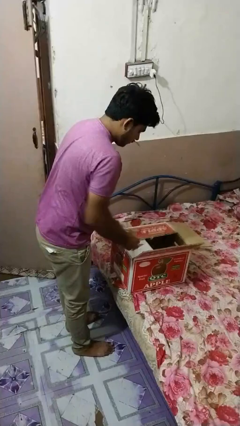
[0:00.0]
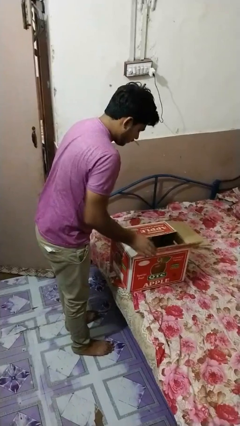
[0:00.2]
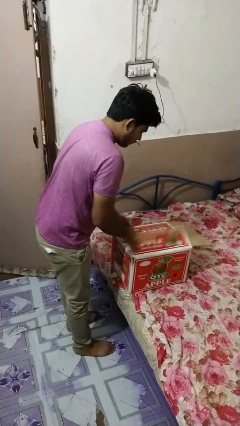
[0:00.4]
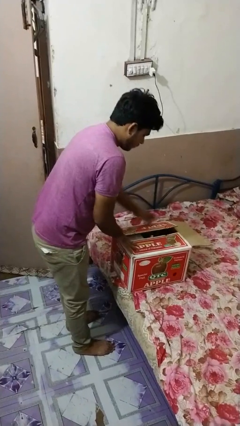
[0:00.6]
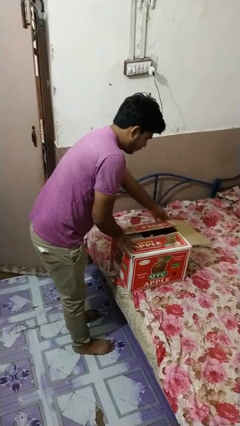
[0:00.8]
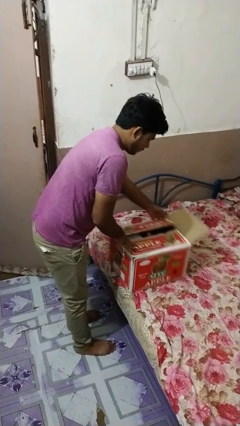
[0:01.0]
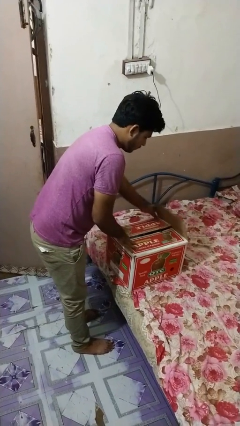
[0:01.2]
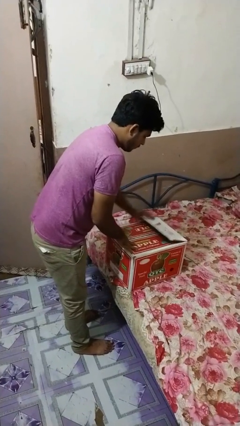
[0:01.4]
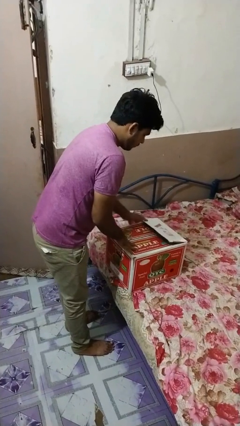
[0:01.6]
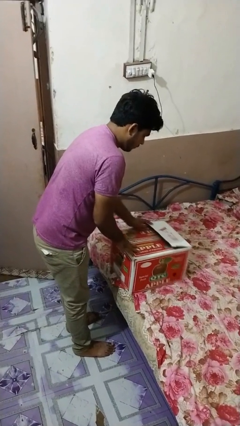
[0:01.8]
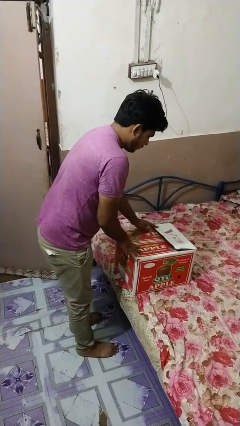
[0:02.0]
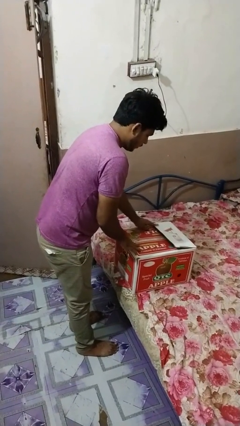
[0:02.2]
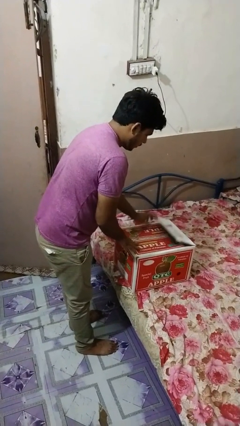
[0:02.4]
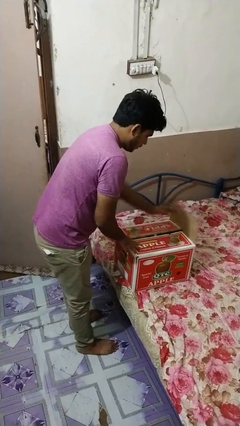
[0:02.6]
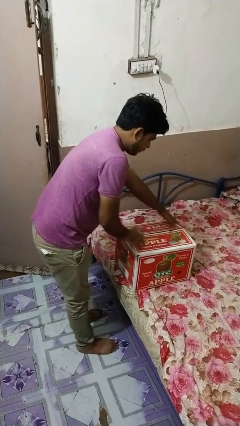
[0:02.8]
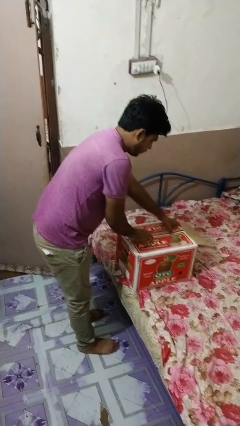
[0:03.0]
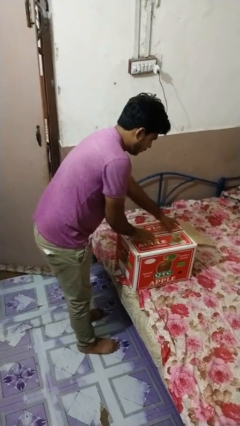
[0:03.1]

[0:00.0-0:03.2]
person closes box

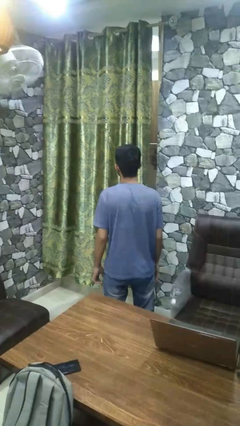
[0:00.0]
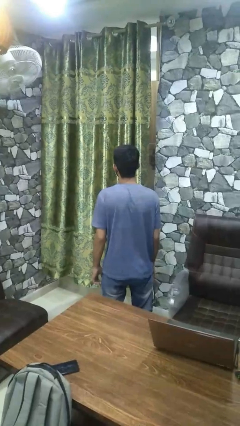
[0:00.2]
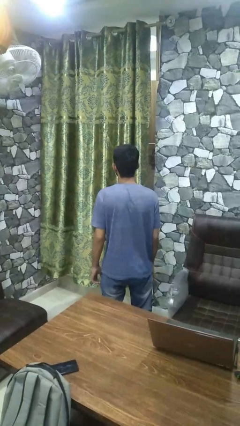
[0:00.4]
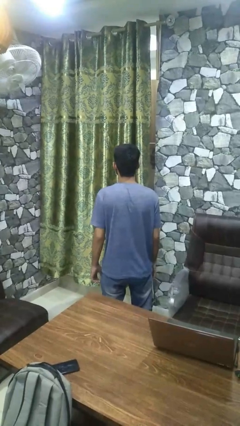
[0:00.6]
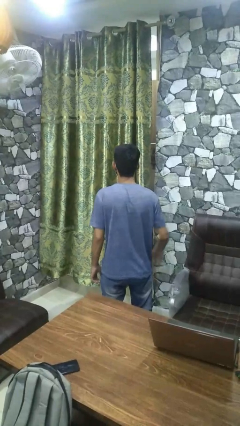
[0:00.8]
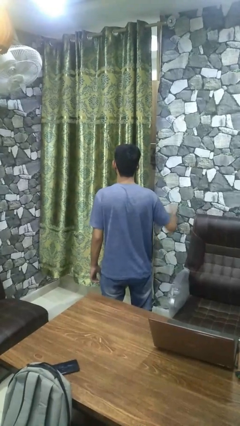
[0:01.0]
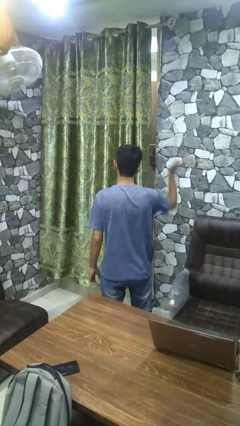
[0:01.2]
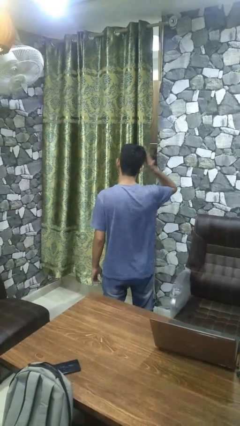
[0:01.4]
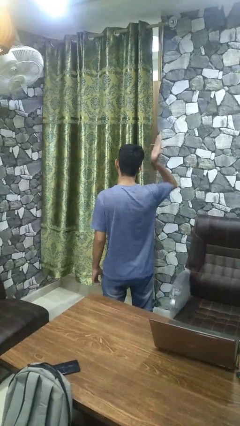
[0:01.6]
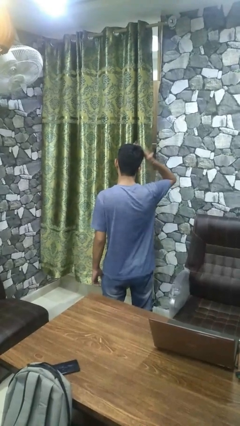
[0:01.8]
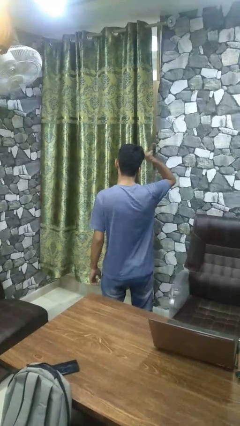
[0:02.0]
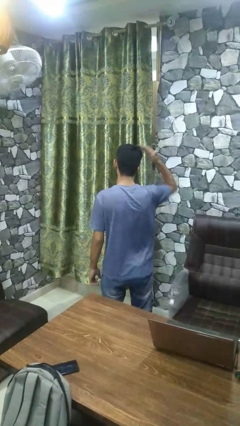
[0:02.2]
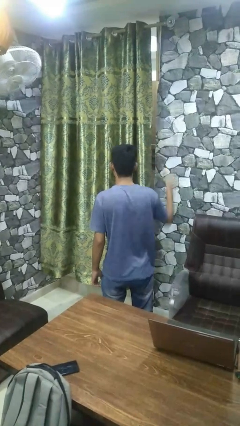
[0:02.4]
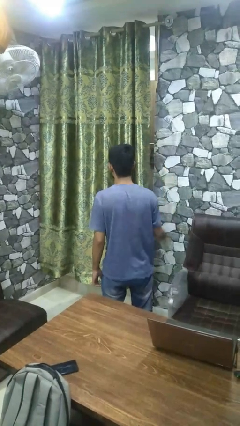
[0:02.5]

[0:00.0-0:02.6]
person pats head

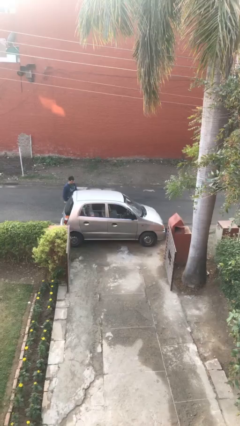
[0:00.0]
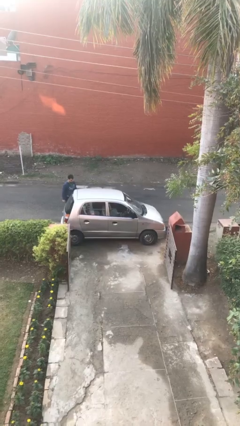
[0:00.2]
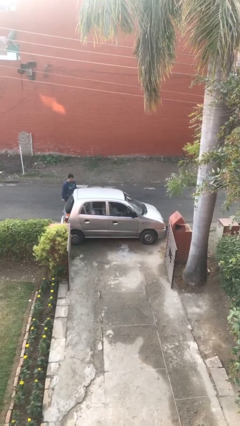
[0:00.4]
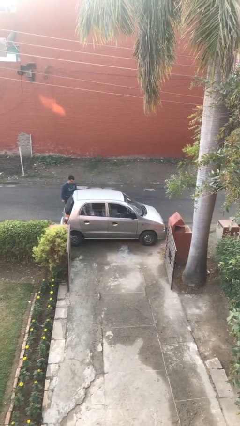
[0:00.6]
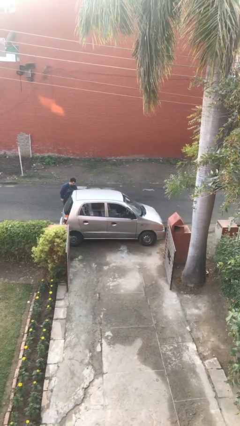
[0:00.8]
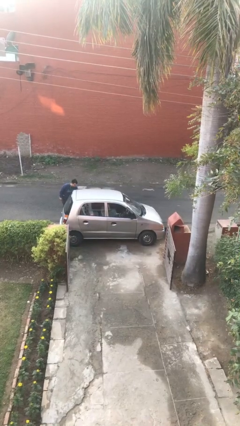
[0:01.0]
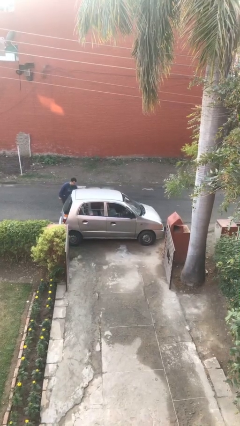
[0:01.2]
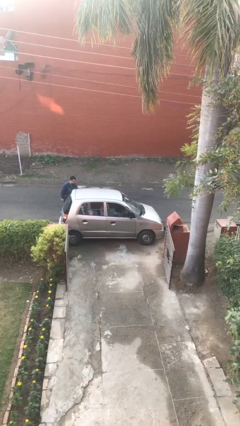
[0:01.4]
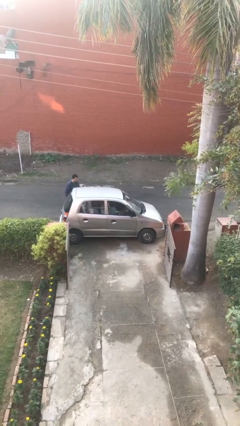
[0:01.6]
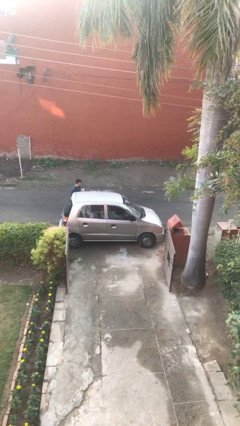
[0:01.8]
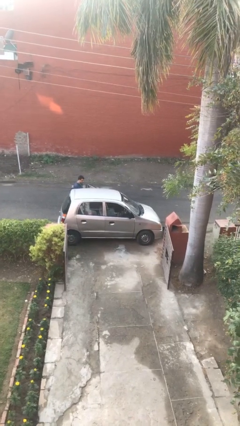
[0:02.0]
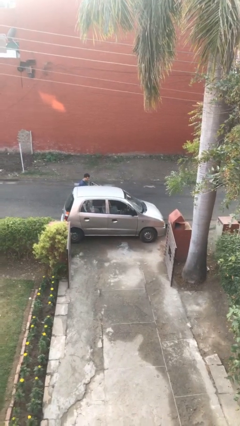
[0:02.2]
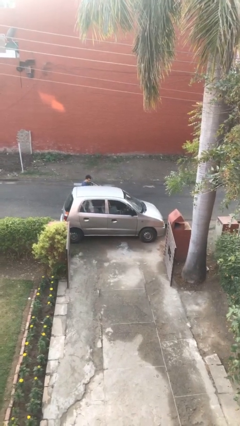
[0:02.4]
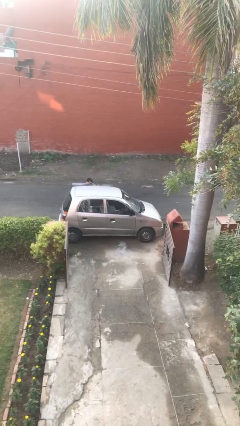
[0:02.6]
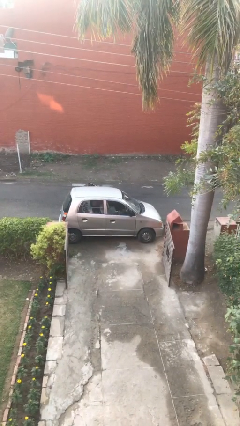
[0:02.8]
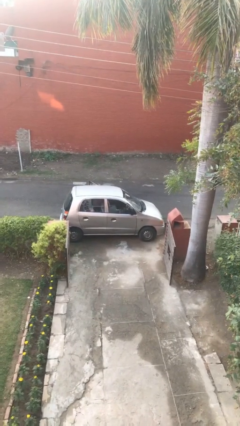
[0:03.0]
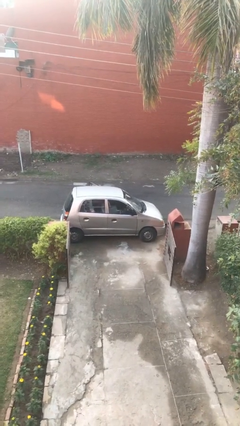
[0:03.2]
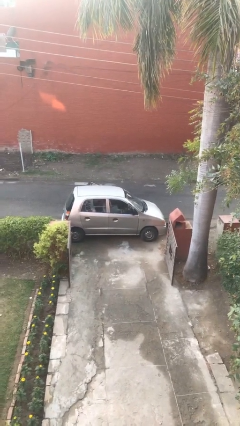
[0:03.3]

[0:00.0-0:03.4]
car picks up person

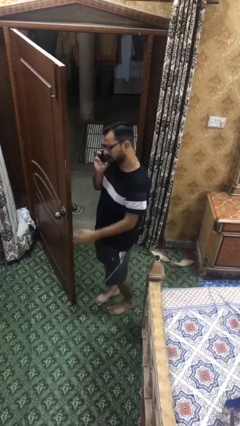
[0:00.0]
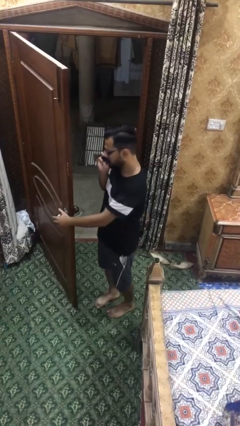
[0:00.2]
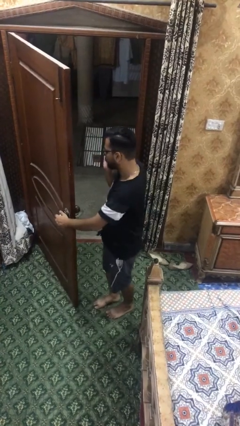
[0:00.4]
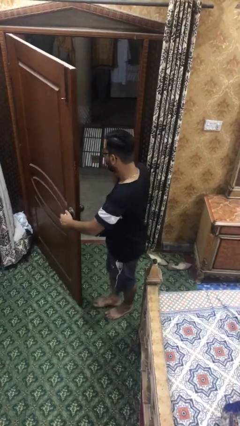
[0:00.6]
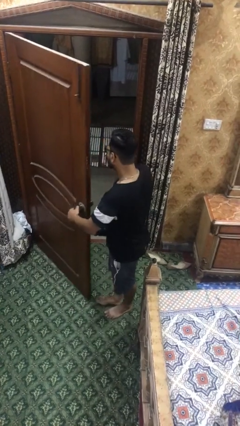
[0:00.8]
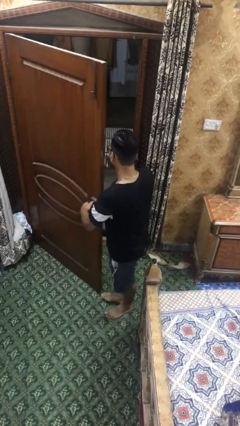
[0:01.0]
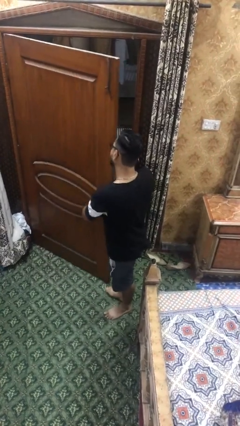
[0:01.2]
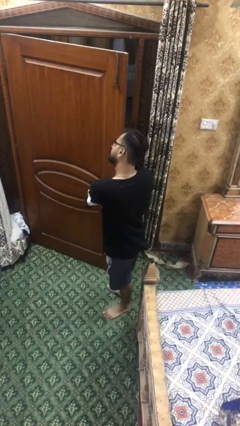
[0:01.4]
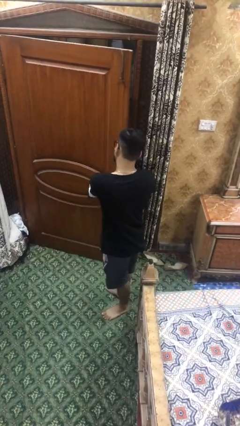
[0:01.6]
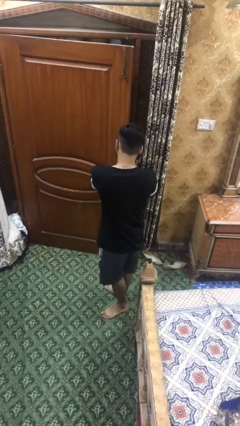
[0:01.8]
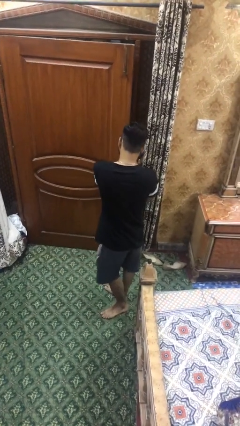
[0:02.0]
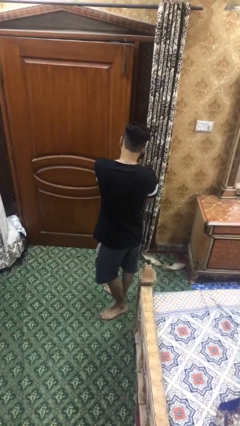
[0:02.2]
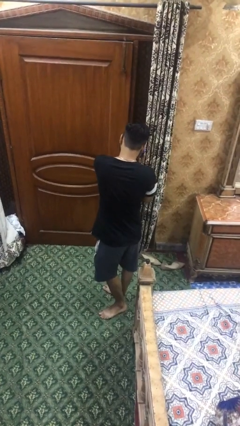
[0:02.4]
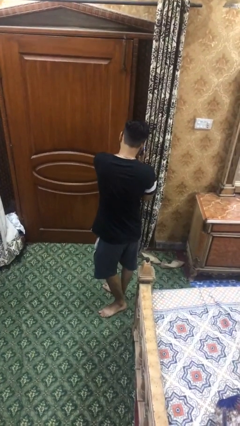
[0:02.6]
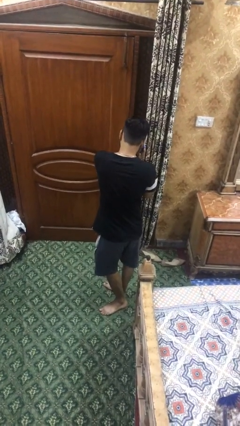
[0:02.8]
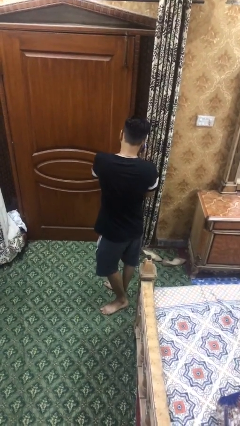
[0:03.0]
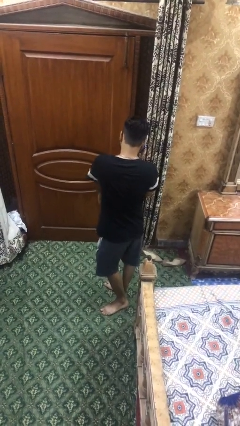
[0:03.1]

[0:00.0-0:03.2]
person closes facility door

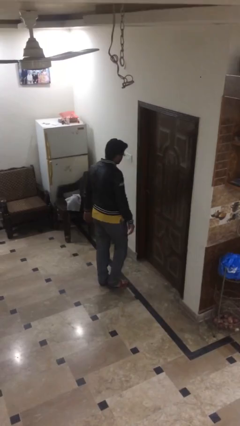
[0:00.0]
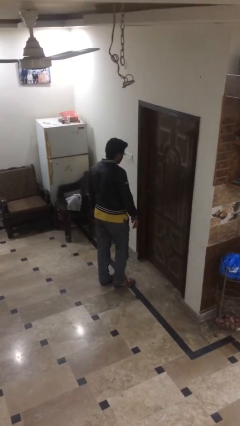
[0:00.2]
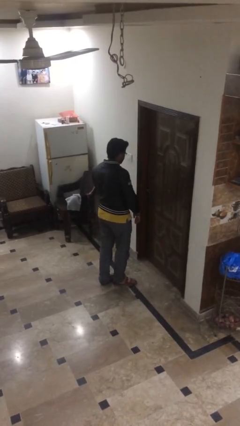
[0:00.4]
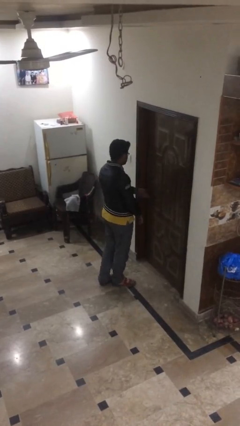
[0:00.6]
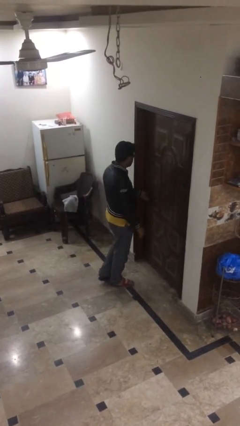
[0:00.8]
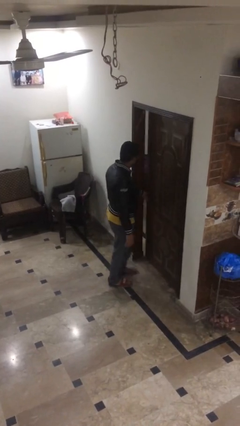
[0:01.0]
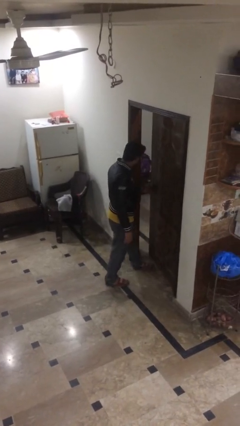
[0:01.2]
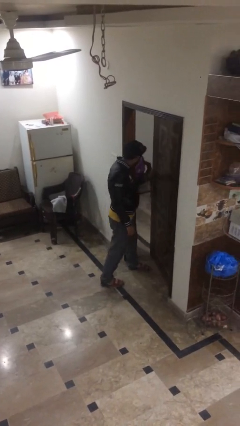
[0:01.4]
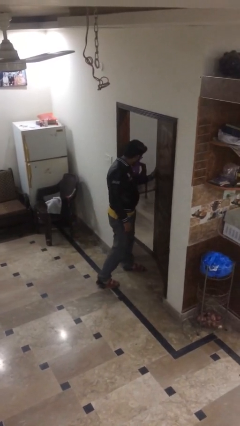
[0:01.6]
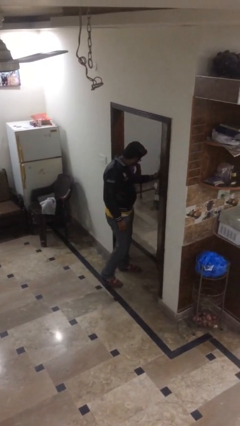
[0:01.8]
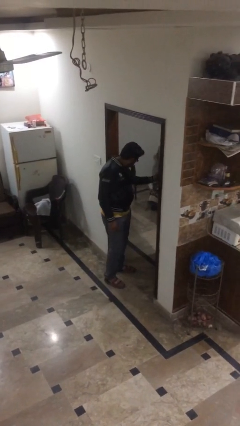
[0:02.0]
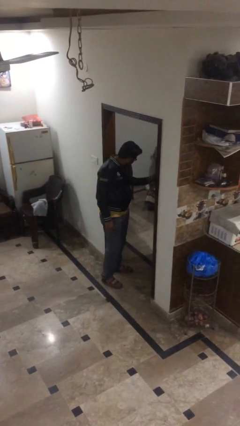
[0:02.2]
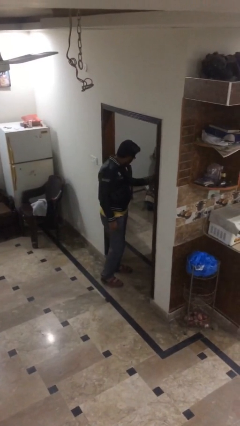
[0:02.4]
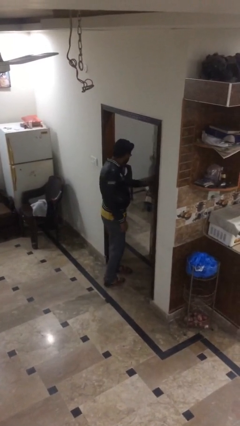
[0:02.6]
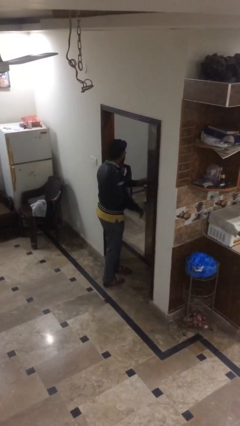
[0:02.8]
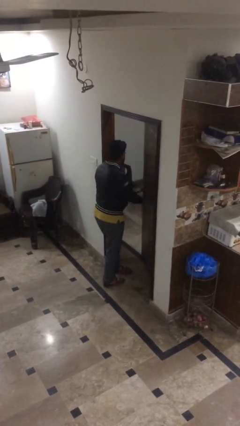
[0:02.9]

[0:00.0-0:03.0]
person opens facility door

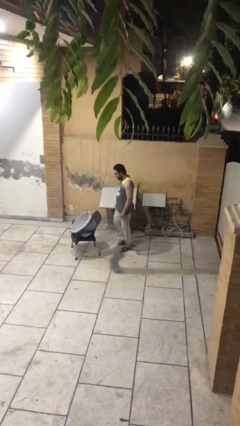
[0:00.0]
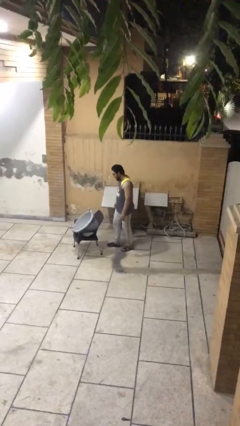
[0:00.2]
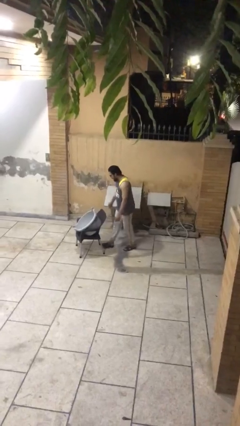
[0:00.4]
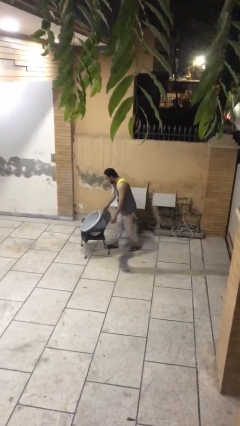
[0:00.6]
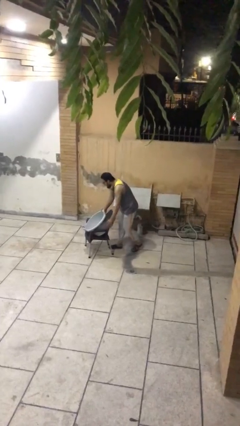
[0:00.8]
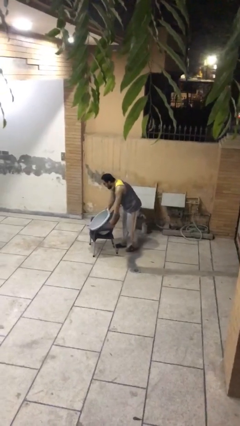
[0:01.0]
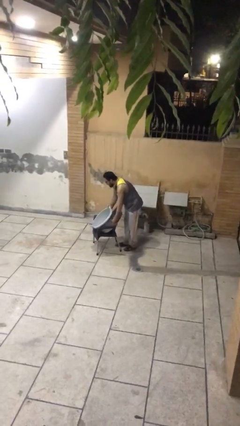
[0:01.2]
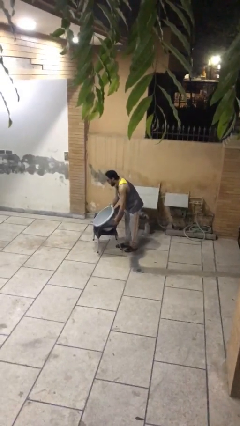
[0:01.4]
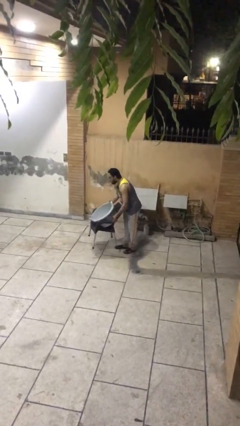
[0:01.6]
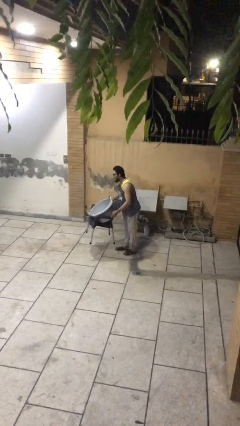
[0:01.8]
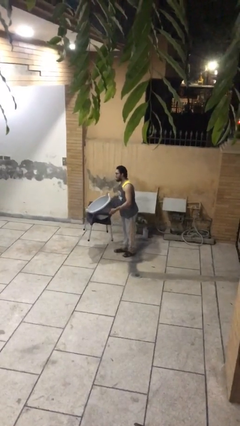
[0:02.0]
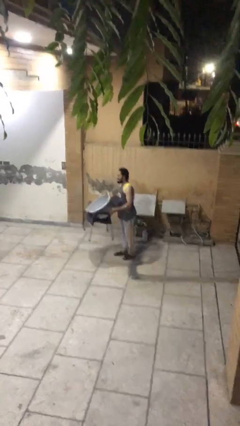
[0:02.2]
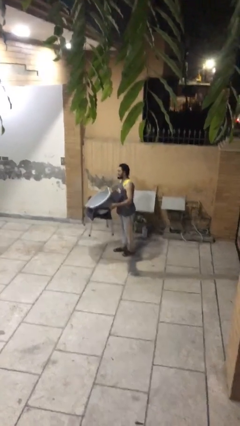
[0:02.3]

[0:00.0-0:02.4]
person picks up object from floor
